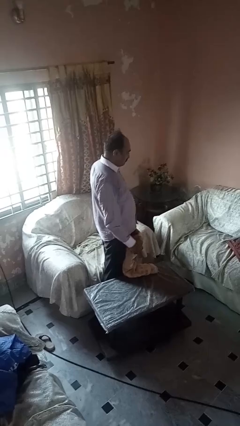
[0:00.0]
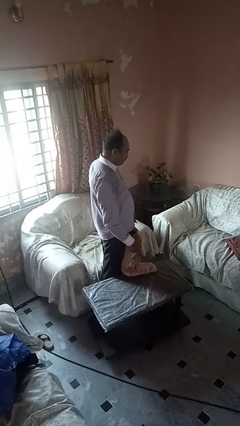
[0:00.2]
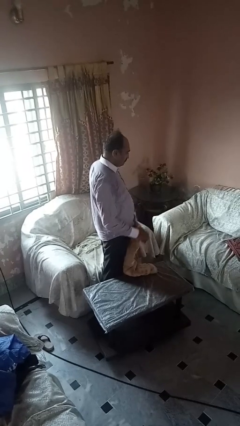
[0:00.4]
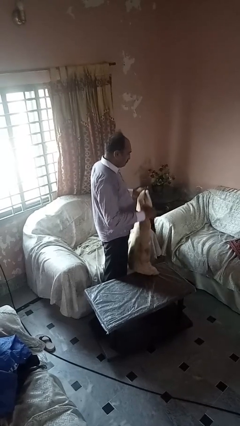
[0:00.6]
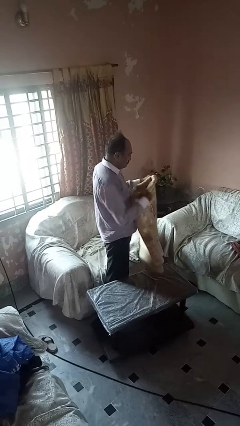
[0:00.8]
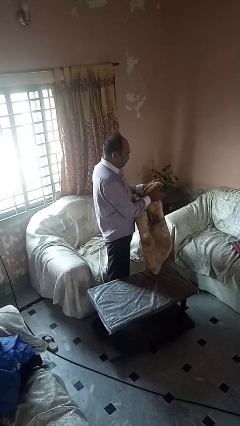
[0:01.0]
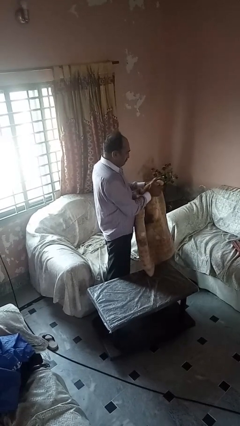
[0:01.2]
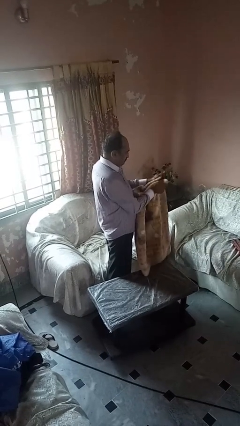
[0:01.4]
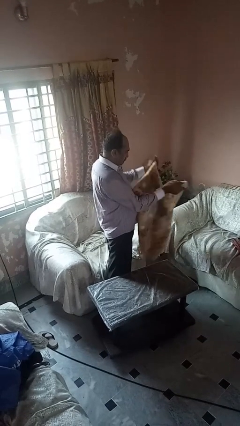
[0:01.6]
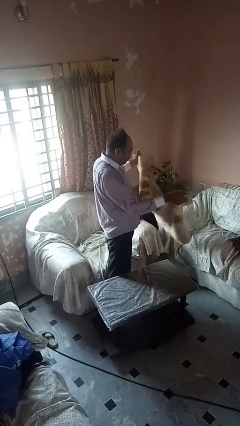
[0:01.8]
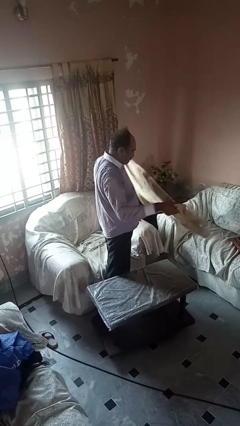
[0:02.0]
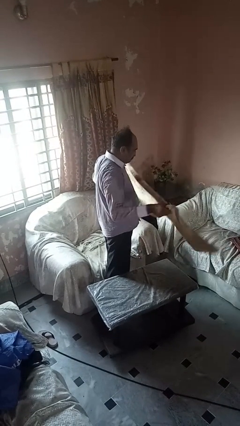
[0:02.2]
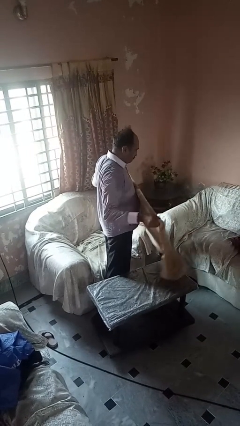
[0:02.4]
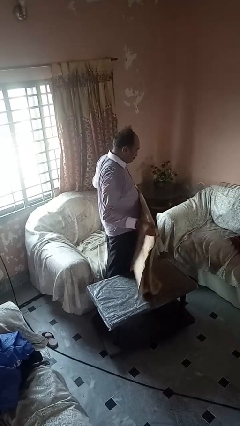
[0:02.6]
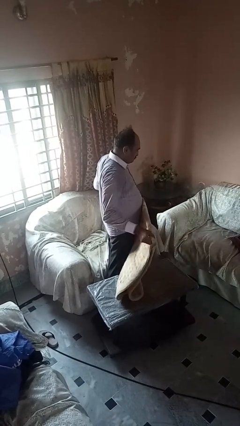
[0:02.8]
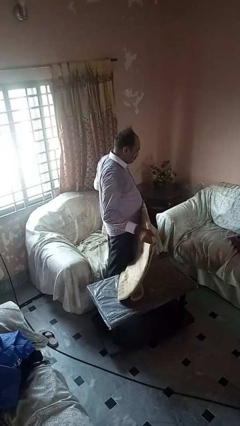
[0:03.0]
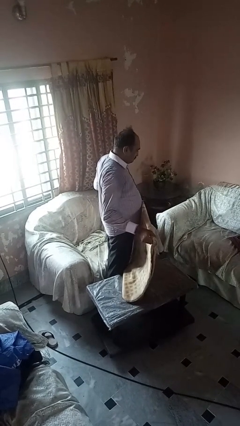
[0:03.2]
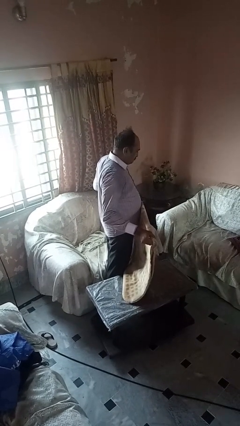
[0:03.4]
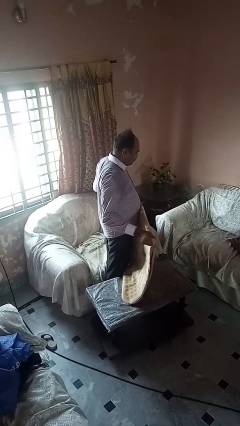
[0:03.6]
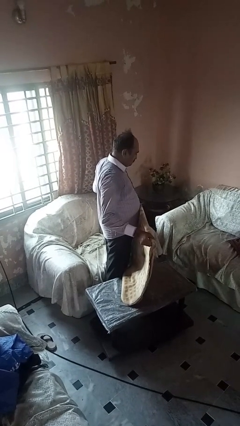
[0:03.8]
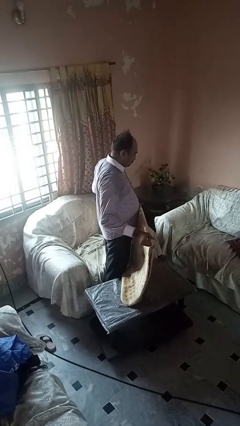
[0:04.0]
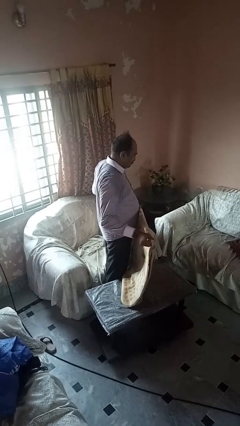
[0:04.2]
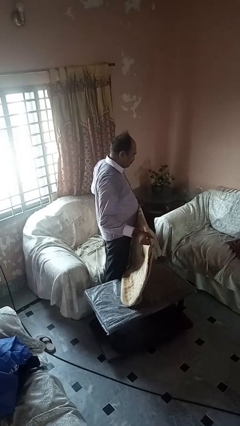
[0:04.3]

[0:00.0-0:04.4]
person unfolds blanket

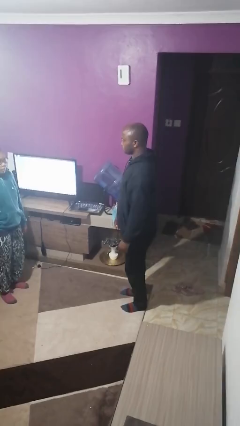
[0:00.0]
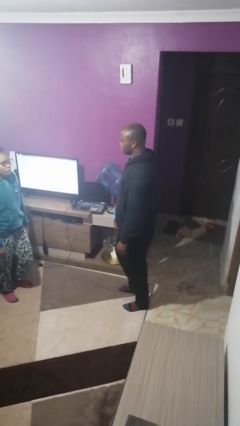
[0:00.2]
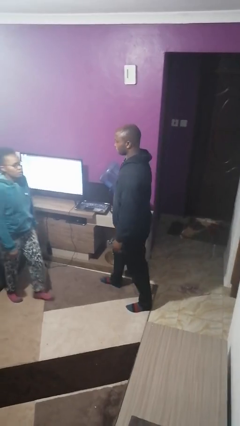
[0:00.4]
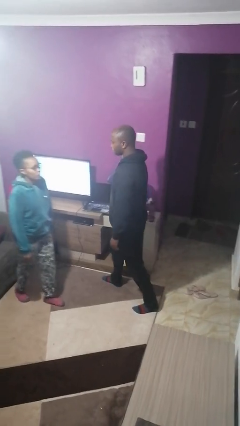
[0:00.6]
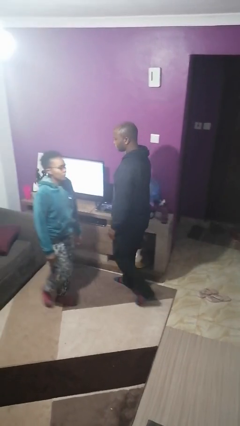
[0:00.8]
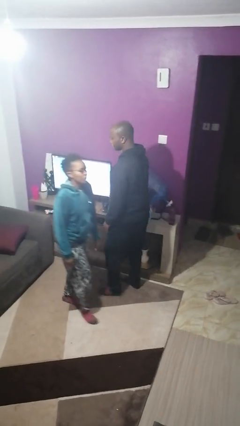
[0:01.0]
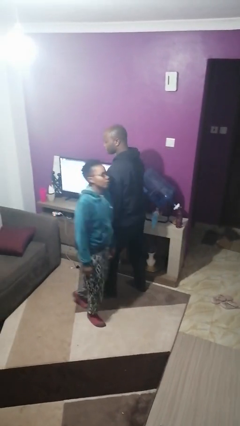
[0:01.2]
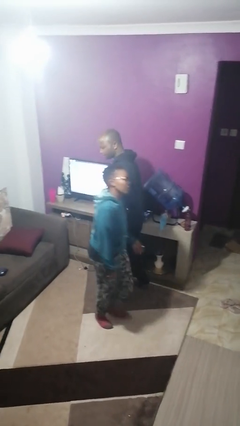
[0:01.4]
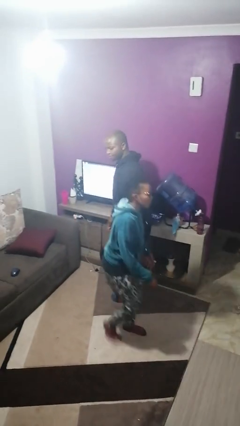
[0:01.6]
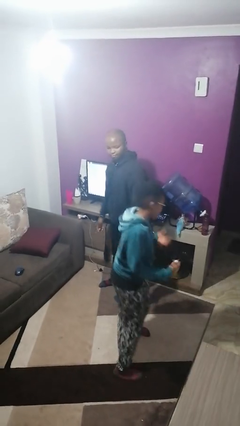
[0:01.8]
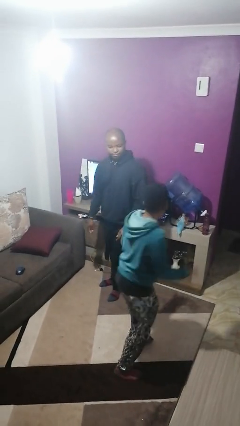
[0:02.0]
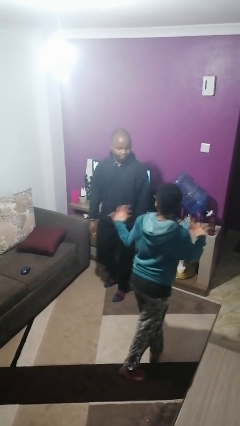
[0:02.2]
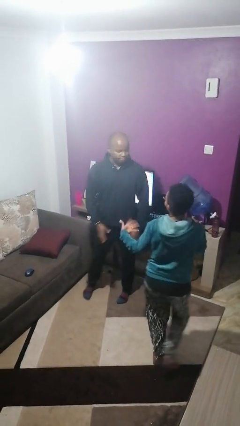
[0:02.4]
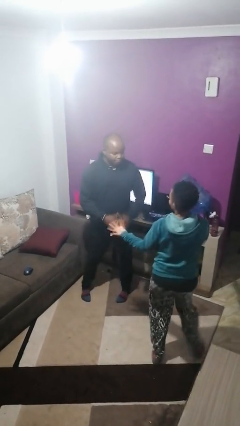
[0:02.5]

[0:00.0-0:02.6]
person bumps into person

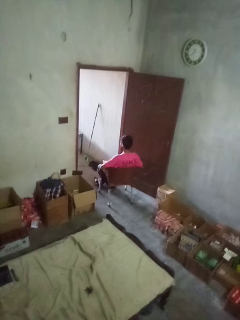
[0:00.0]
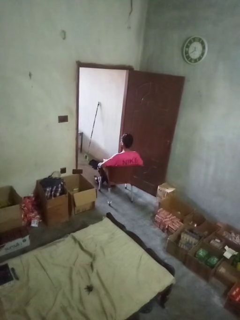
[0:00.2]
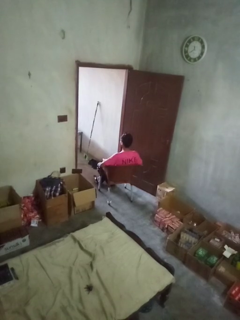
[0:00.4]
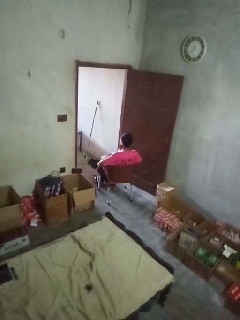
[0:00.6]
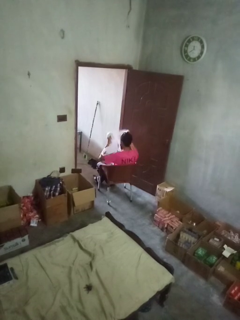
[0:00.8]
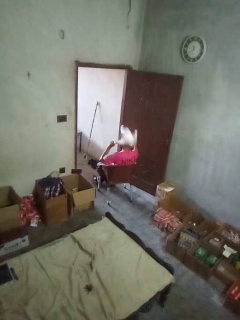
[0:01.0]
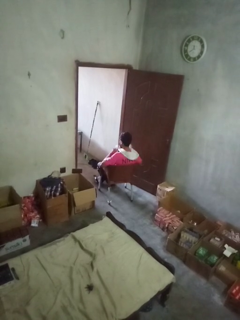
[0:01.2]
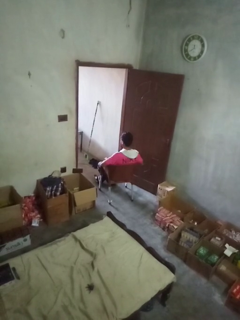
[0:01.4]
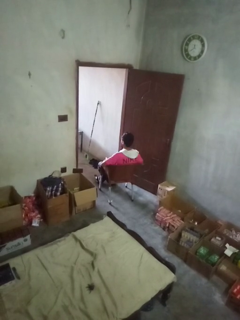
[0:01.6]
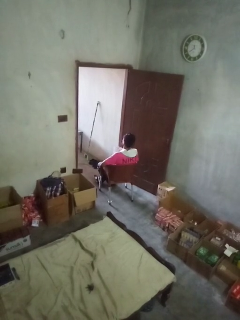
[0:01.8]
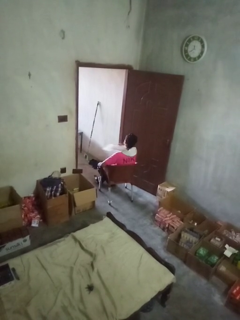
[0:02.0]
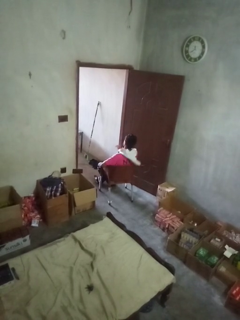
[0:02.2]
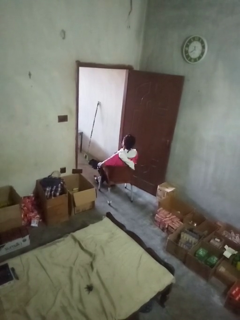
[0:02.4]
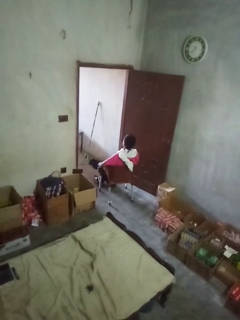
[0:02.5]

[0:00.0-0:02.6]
person puts on scarf

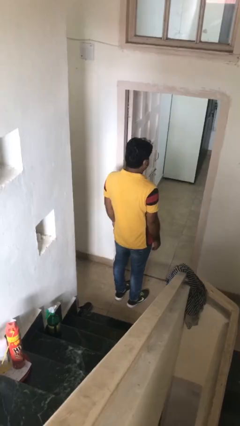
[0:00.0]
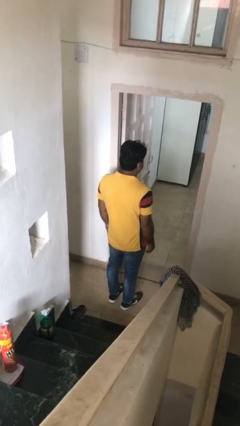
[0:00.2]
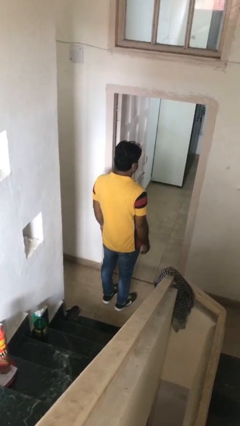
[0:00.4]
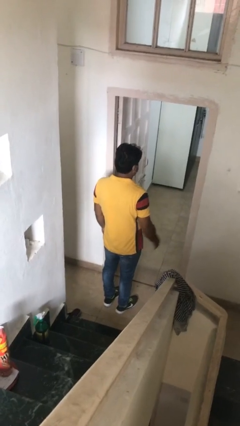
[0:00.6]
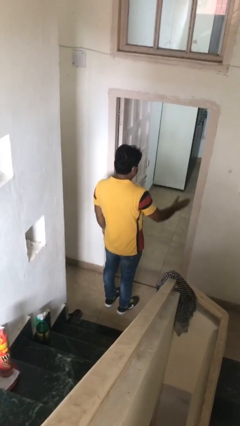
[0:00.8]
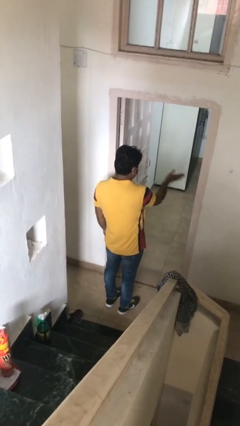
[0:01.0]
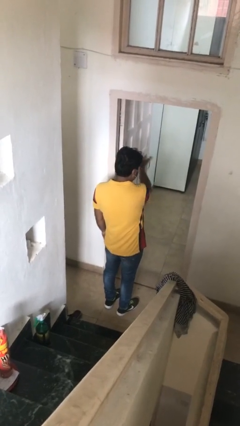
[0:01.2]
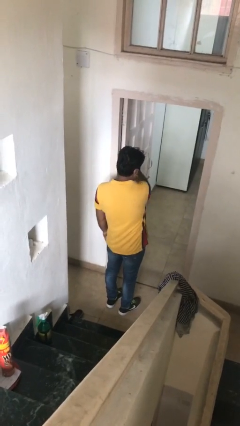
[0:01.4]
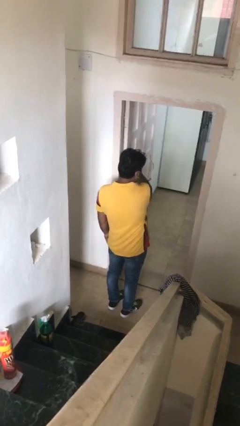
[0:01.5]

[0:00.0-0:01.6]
person gestures swipe left

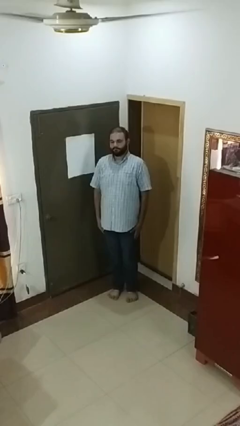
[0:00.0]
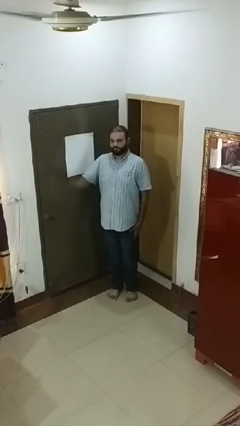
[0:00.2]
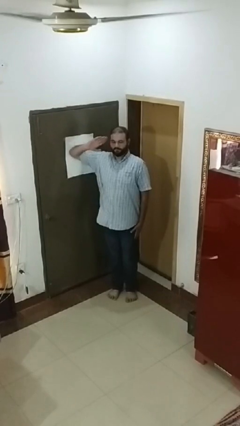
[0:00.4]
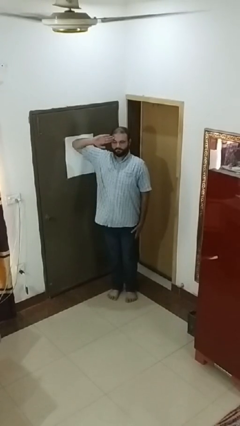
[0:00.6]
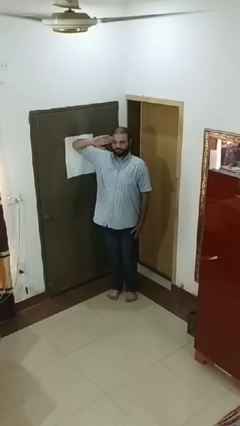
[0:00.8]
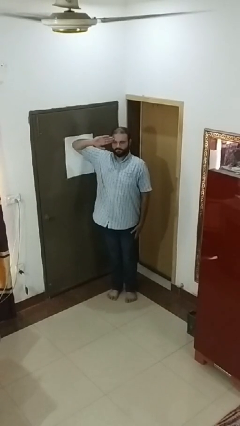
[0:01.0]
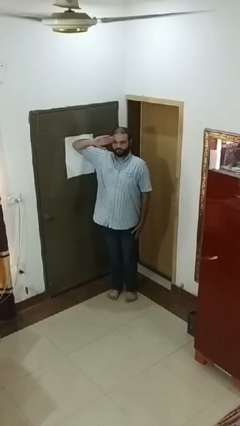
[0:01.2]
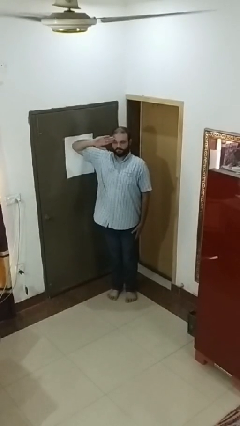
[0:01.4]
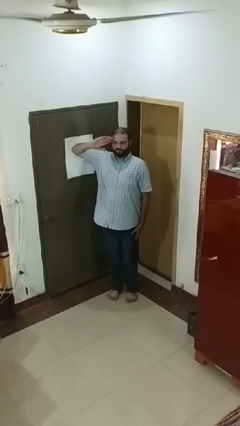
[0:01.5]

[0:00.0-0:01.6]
person salutes

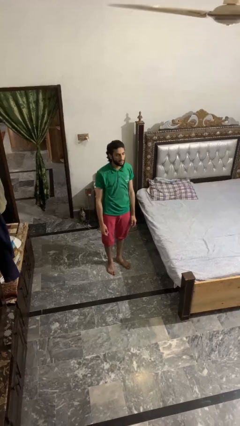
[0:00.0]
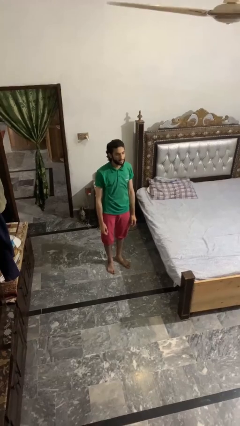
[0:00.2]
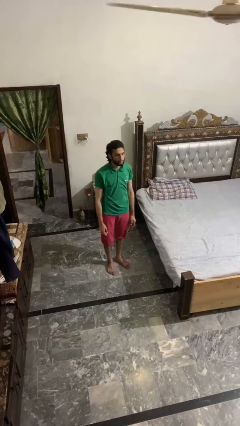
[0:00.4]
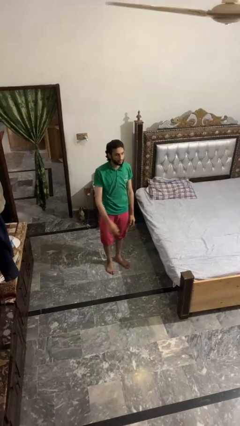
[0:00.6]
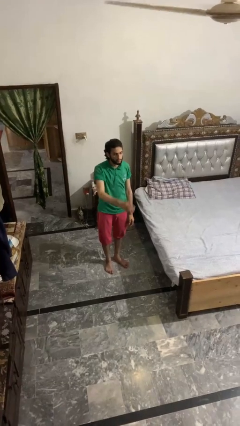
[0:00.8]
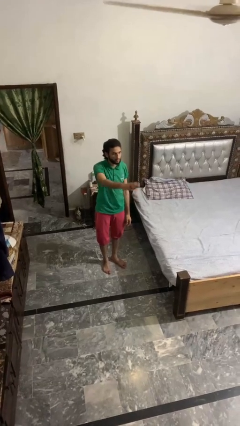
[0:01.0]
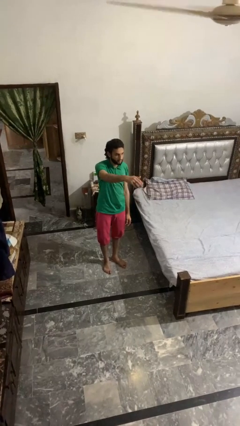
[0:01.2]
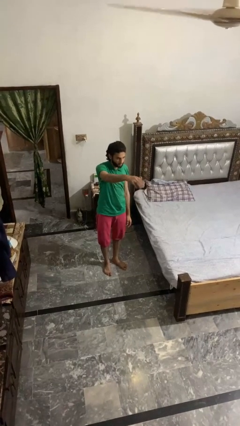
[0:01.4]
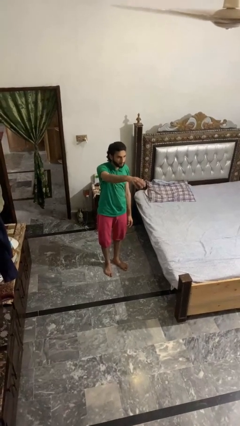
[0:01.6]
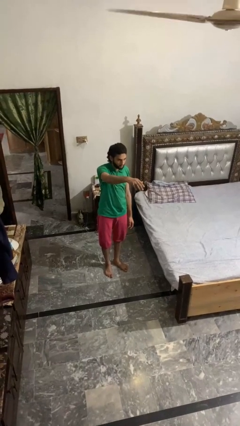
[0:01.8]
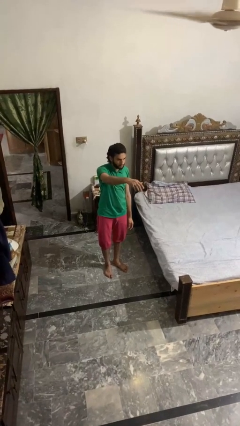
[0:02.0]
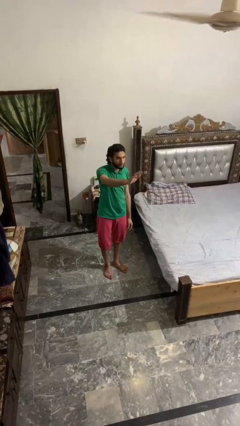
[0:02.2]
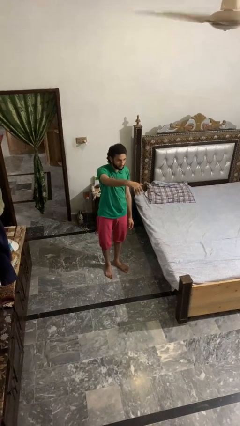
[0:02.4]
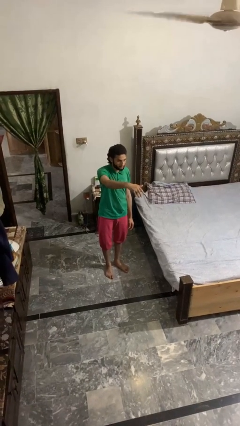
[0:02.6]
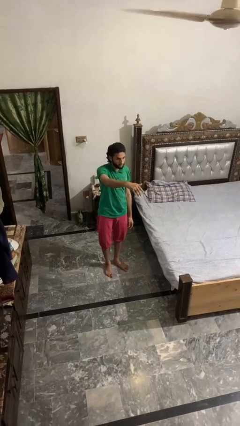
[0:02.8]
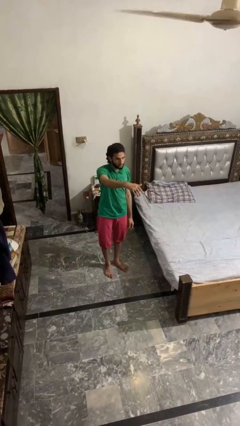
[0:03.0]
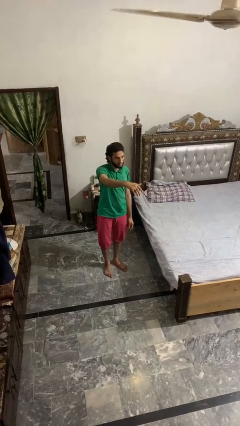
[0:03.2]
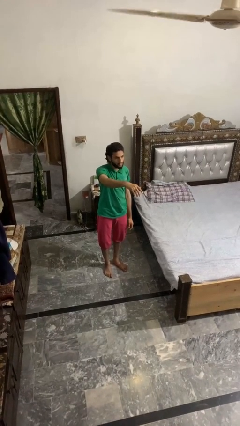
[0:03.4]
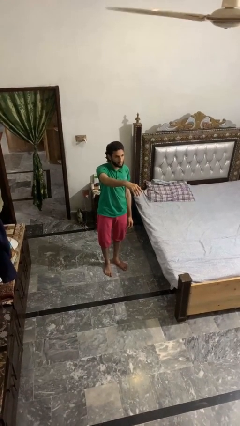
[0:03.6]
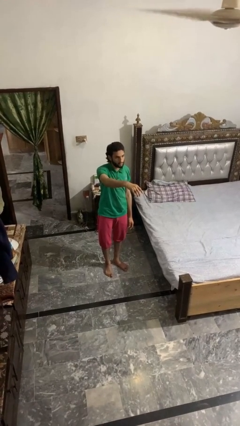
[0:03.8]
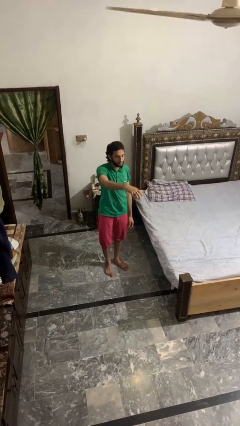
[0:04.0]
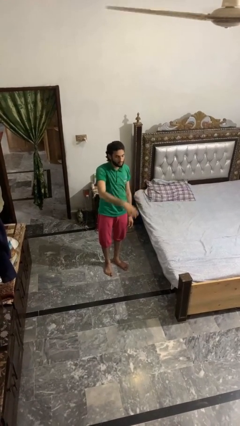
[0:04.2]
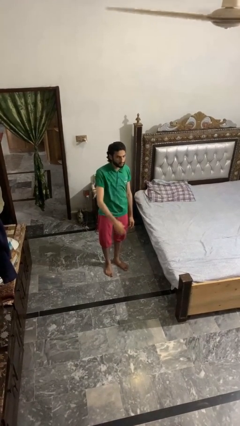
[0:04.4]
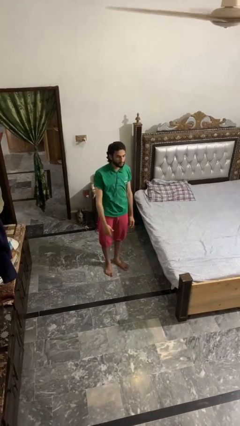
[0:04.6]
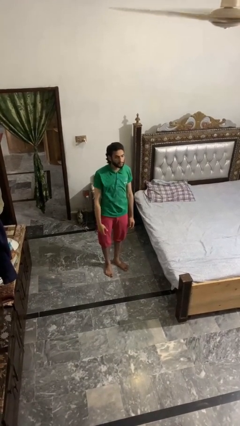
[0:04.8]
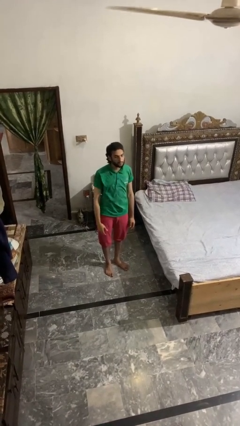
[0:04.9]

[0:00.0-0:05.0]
person gestures come here

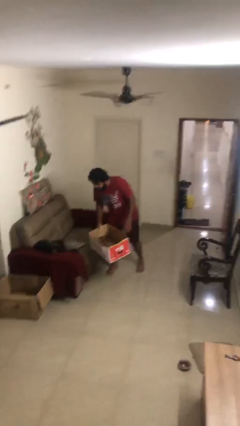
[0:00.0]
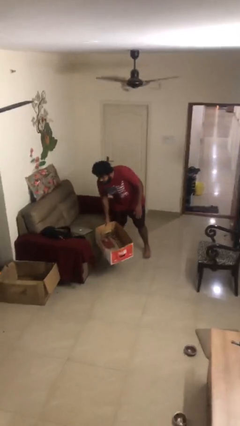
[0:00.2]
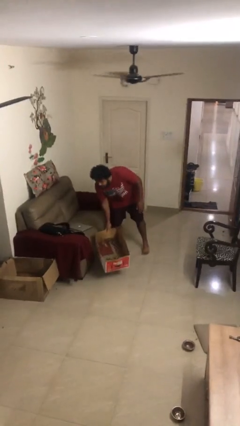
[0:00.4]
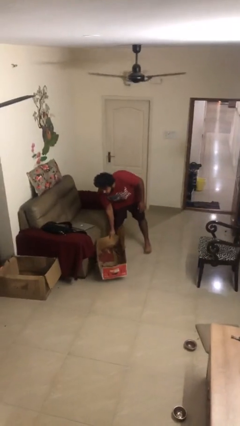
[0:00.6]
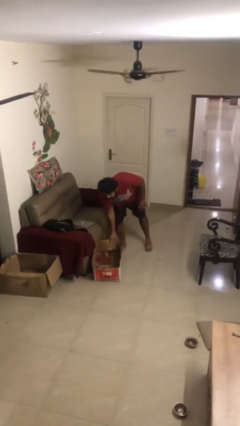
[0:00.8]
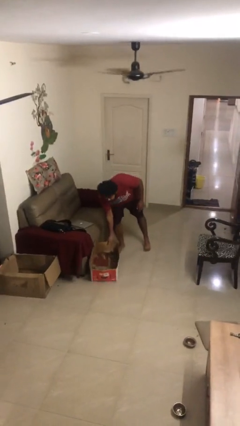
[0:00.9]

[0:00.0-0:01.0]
person puts down object on floor
